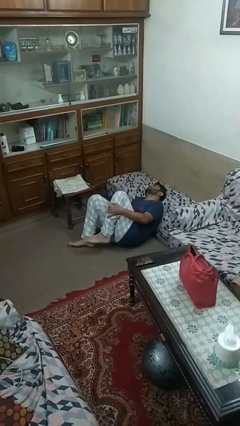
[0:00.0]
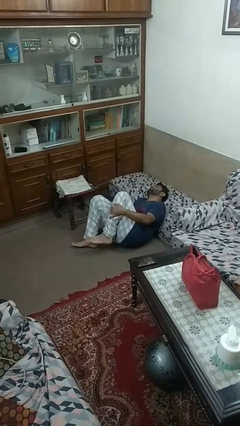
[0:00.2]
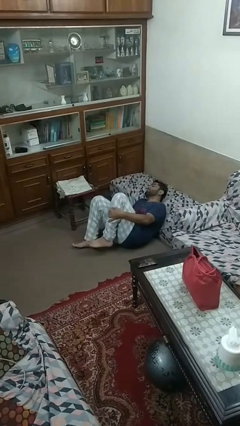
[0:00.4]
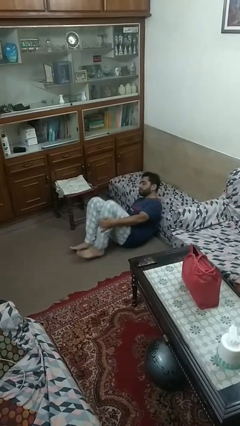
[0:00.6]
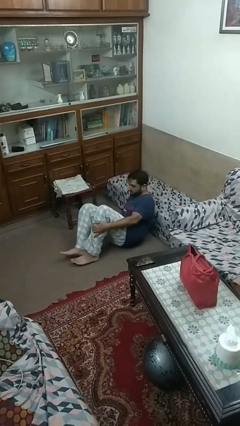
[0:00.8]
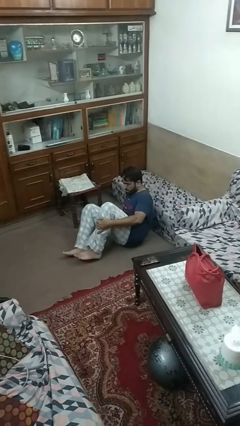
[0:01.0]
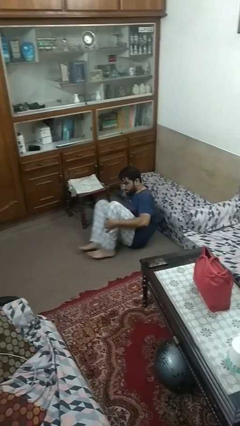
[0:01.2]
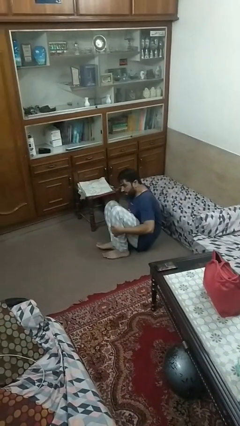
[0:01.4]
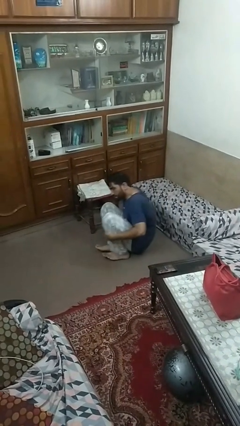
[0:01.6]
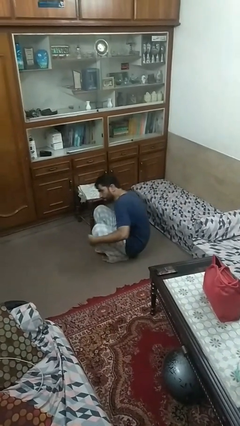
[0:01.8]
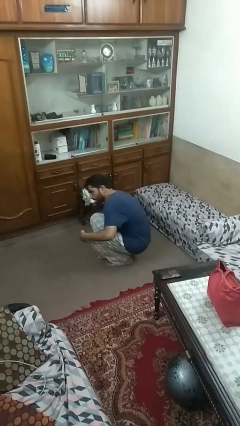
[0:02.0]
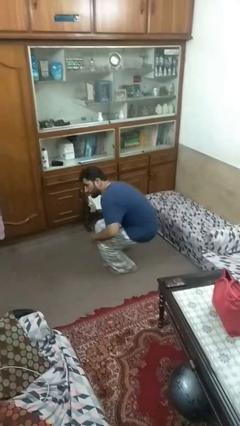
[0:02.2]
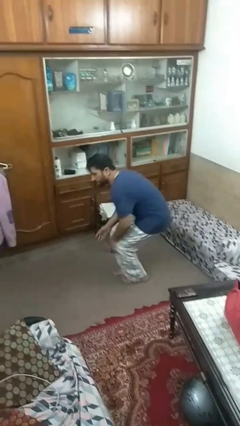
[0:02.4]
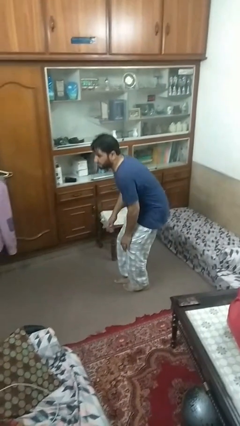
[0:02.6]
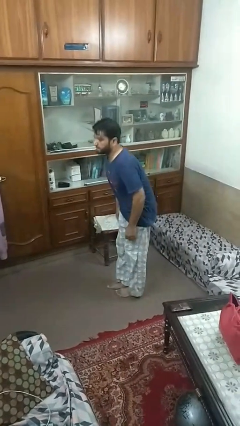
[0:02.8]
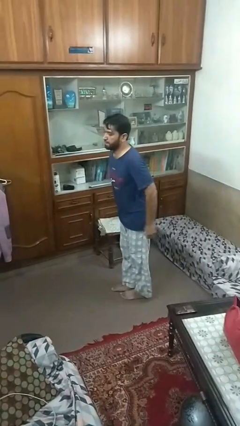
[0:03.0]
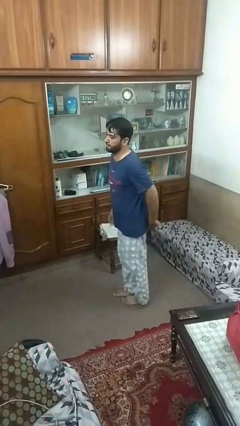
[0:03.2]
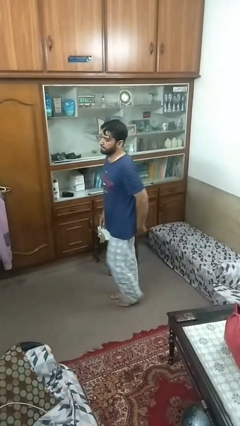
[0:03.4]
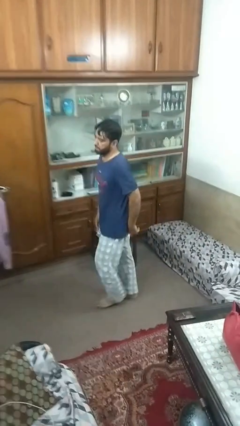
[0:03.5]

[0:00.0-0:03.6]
person stands up from floor

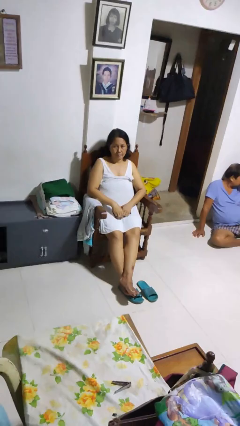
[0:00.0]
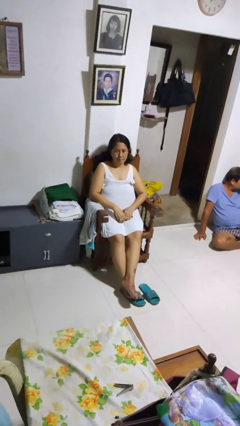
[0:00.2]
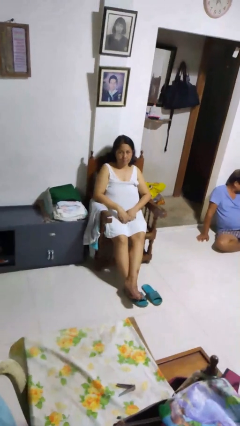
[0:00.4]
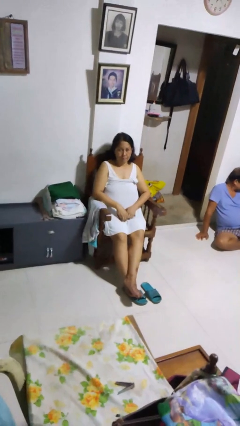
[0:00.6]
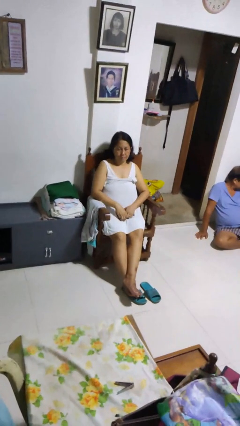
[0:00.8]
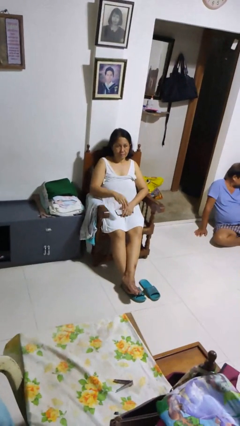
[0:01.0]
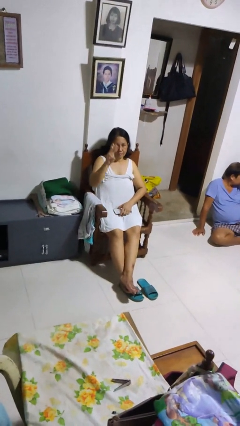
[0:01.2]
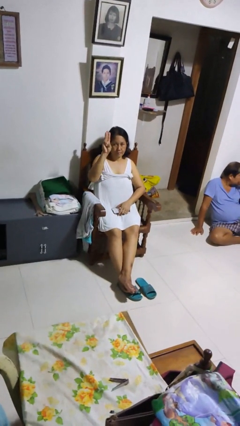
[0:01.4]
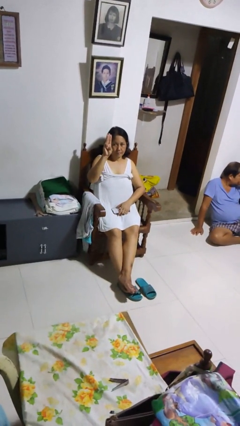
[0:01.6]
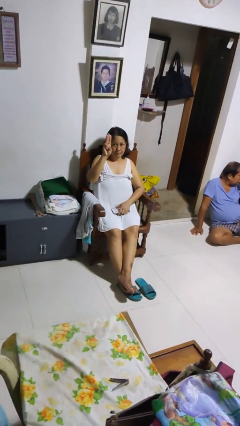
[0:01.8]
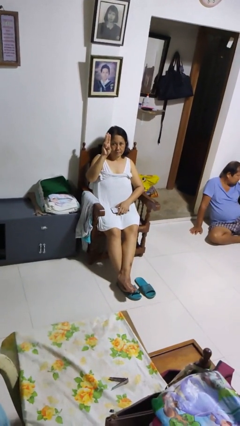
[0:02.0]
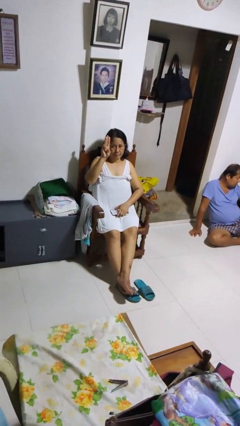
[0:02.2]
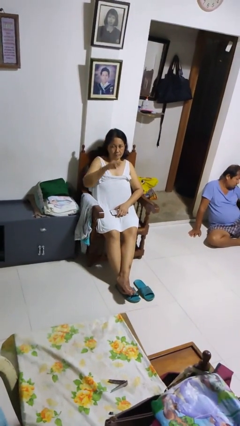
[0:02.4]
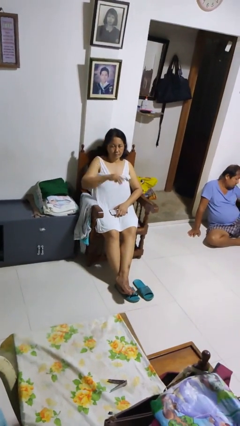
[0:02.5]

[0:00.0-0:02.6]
person gestures number three

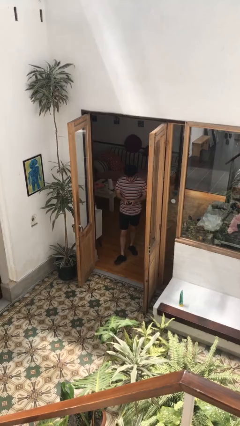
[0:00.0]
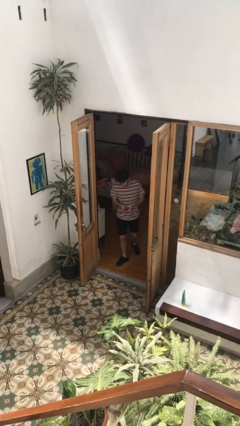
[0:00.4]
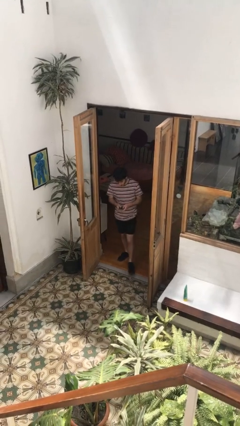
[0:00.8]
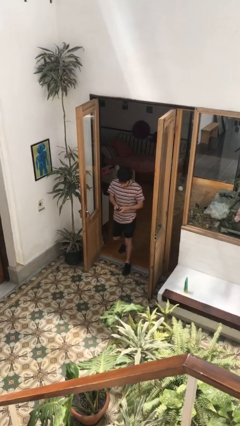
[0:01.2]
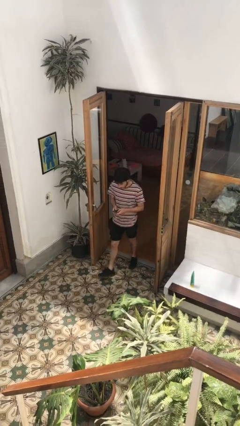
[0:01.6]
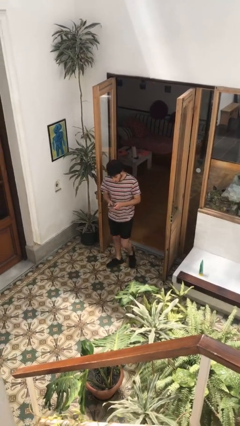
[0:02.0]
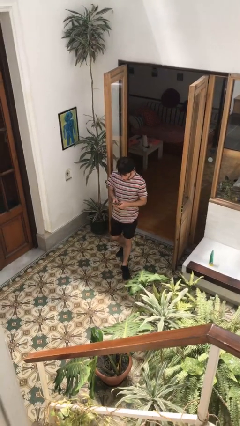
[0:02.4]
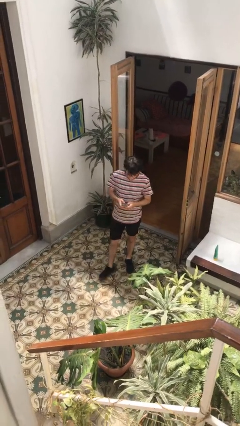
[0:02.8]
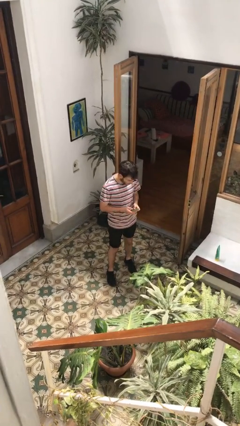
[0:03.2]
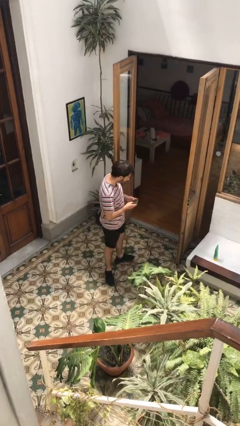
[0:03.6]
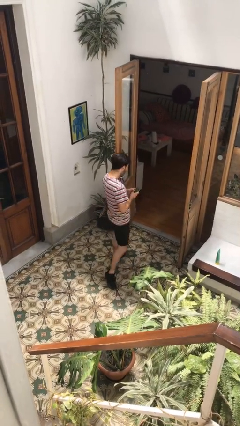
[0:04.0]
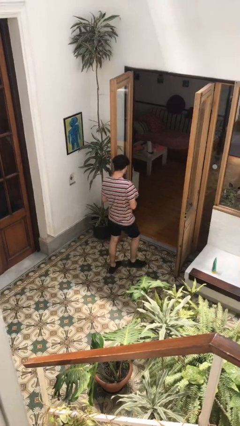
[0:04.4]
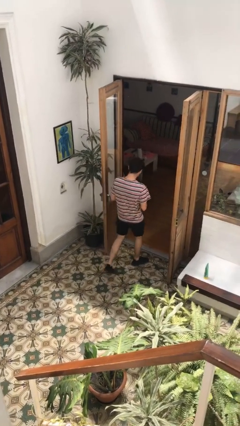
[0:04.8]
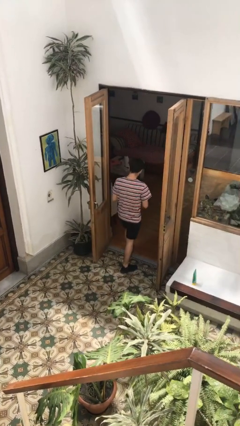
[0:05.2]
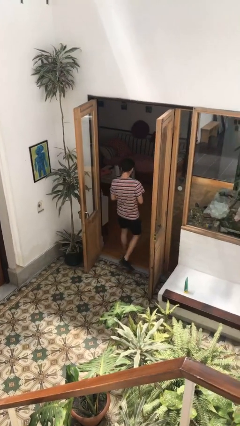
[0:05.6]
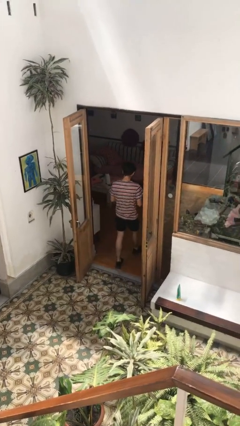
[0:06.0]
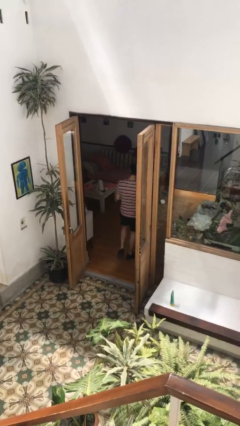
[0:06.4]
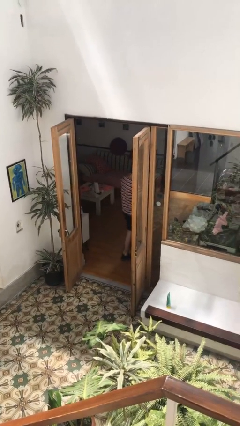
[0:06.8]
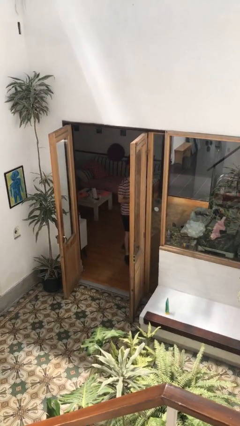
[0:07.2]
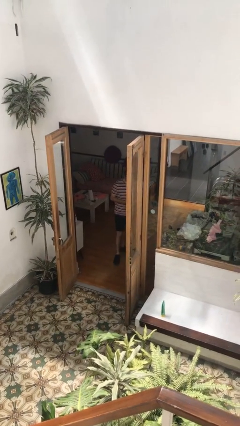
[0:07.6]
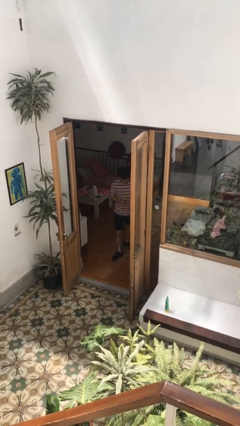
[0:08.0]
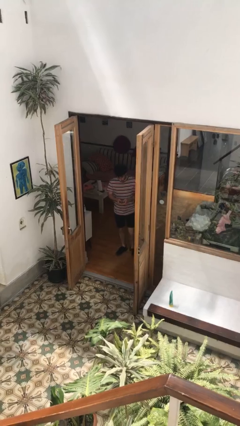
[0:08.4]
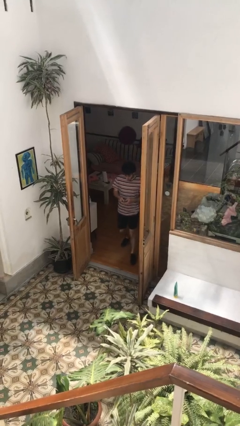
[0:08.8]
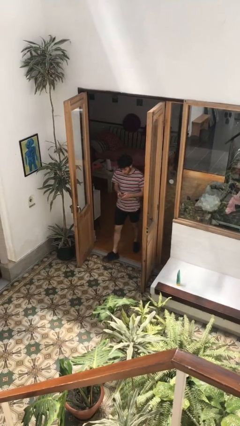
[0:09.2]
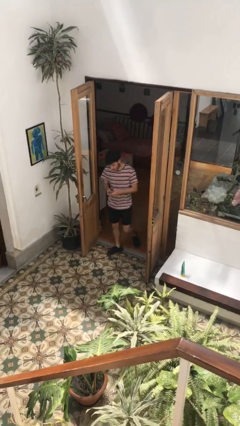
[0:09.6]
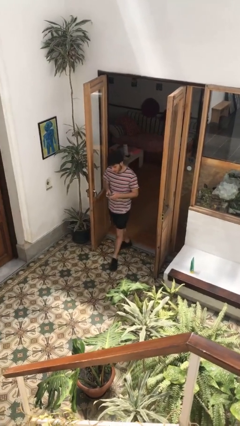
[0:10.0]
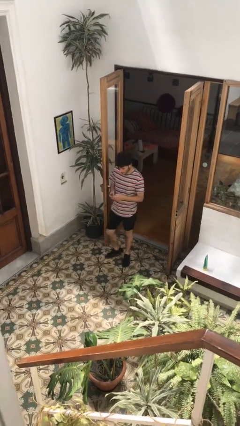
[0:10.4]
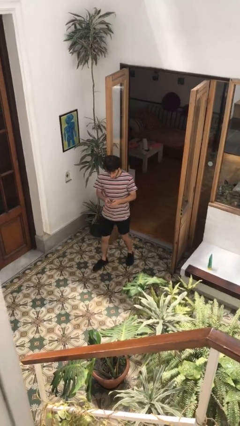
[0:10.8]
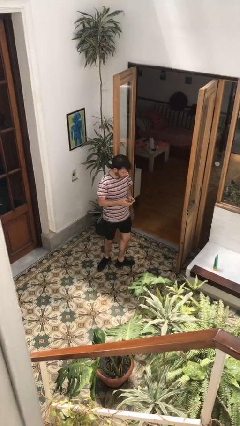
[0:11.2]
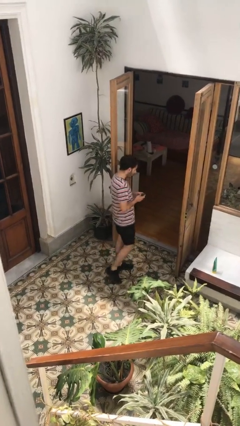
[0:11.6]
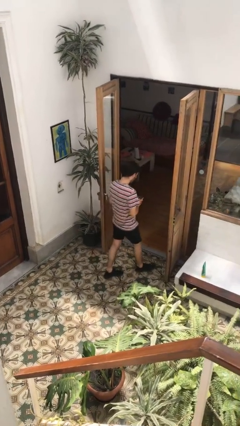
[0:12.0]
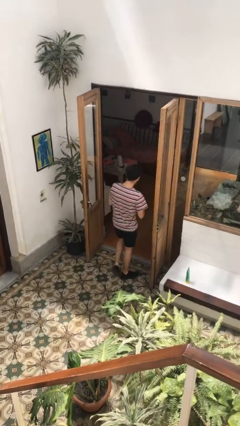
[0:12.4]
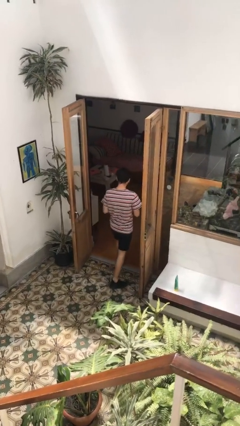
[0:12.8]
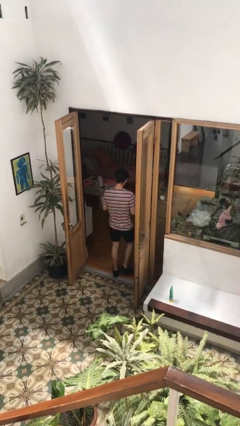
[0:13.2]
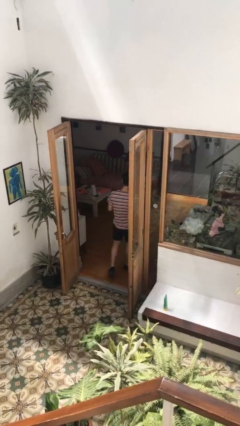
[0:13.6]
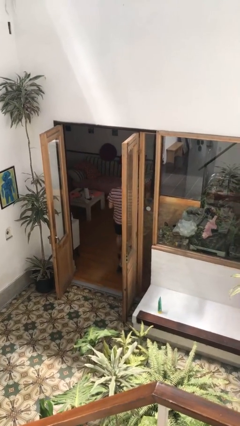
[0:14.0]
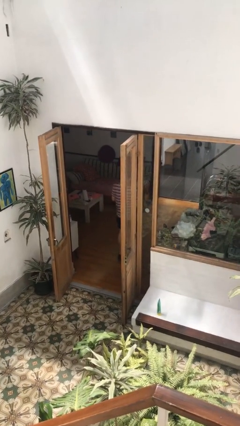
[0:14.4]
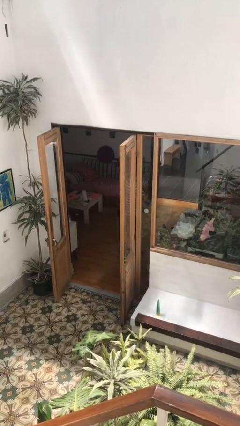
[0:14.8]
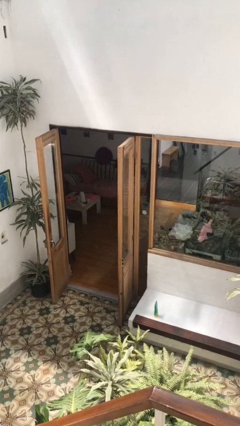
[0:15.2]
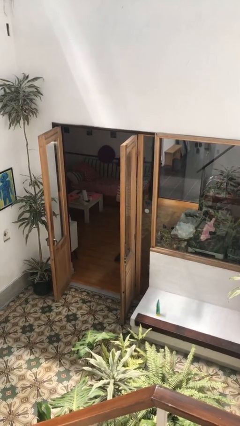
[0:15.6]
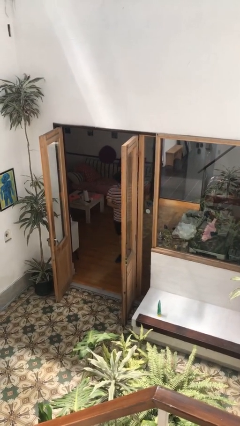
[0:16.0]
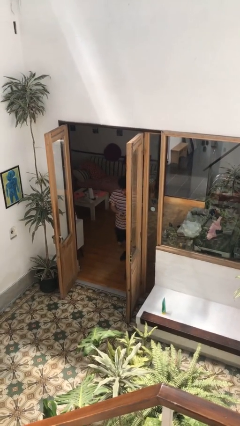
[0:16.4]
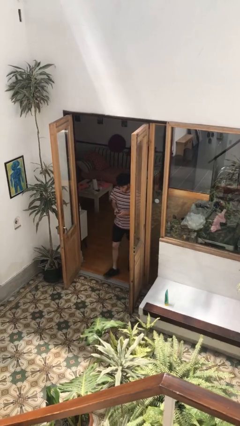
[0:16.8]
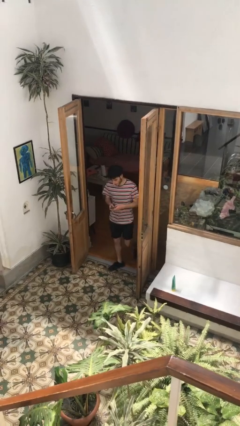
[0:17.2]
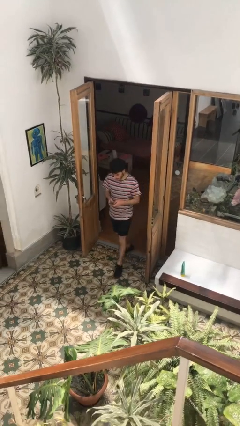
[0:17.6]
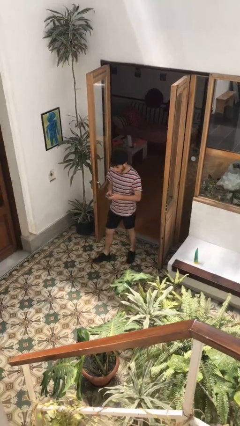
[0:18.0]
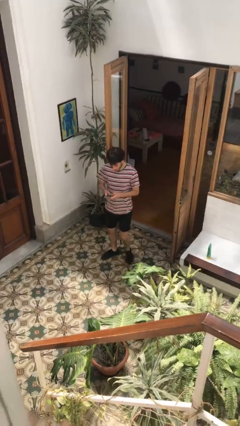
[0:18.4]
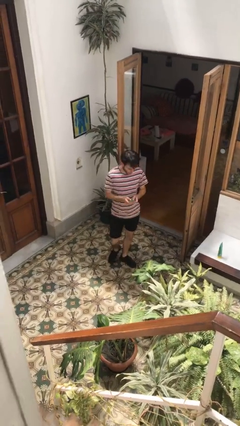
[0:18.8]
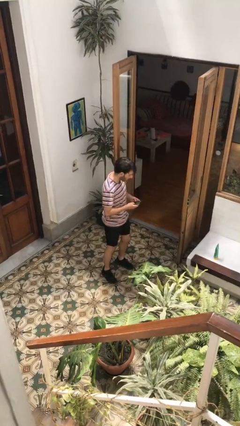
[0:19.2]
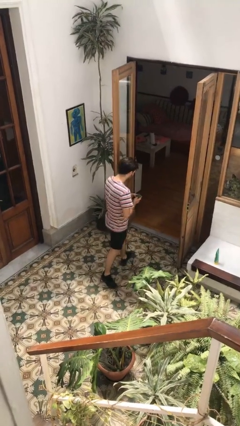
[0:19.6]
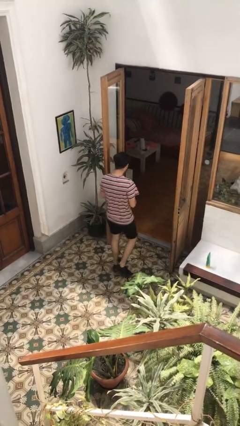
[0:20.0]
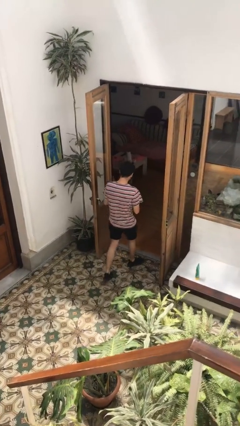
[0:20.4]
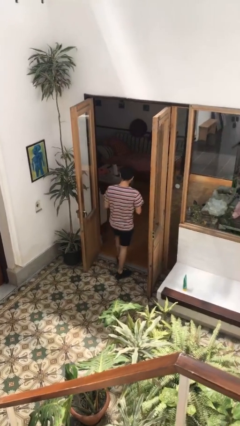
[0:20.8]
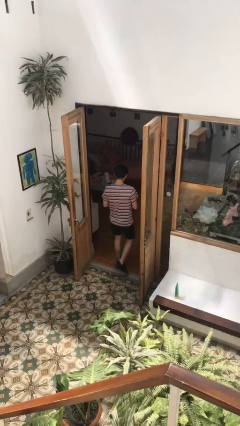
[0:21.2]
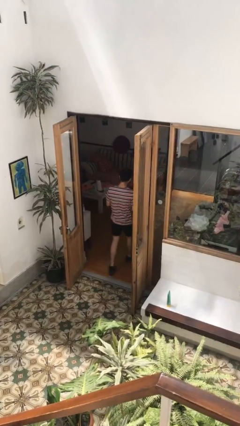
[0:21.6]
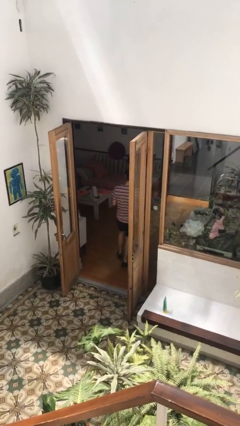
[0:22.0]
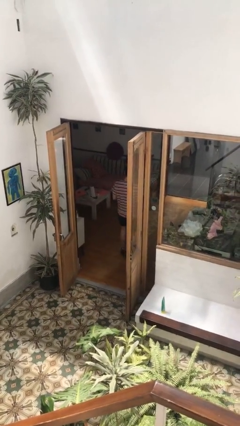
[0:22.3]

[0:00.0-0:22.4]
person texts on phone

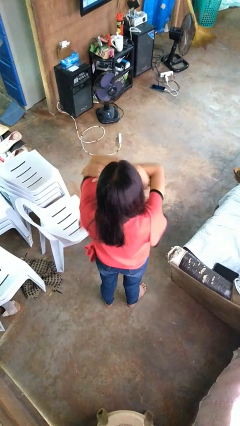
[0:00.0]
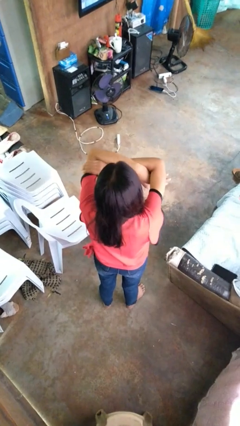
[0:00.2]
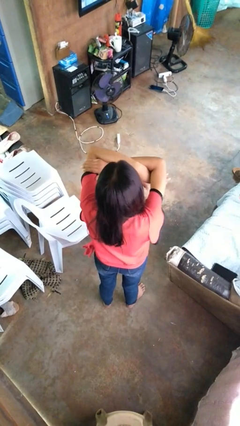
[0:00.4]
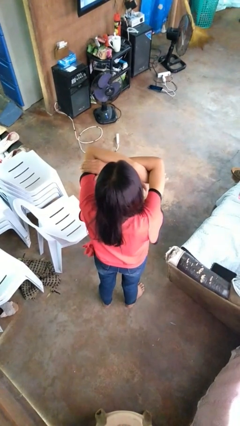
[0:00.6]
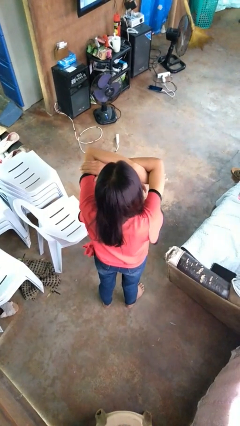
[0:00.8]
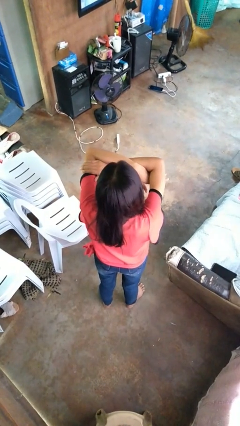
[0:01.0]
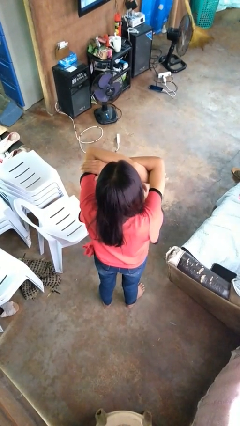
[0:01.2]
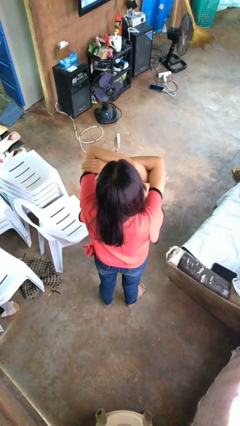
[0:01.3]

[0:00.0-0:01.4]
person gestures arms x
